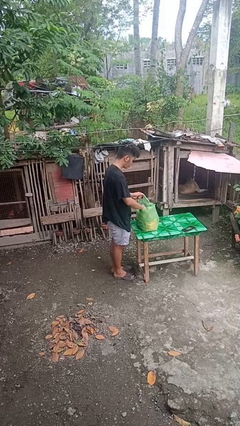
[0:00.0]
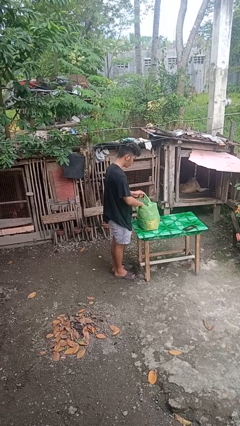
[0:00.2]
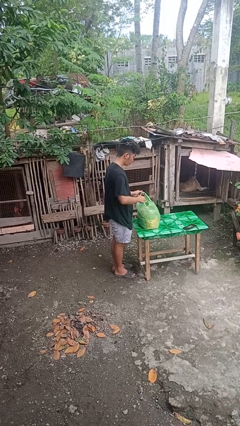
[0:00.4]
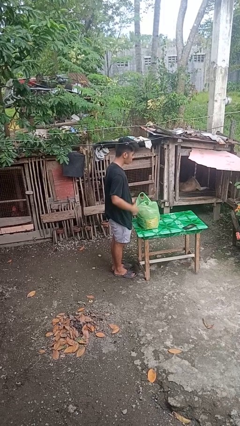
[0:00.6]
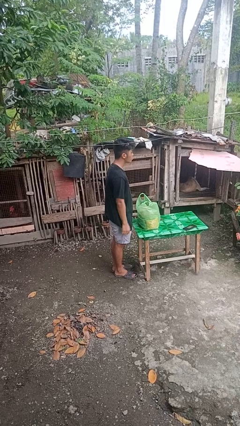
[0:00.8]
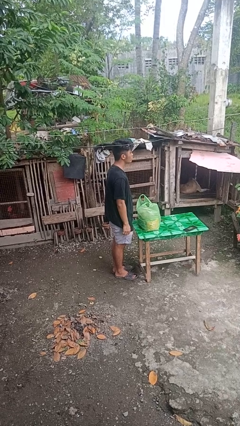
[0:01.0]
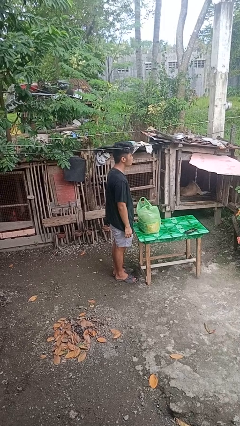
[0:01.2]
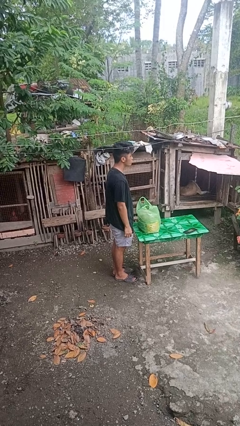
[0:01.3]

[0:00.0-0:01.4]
person puts object into bag

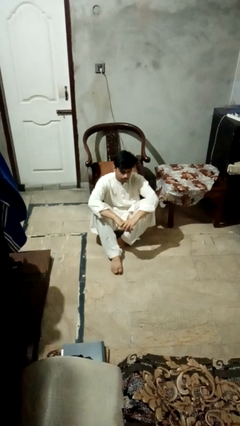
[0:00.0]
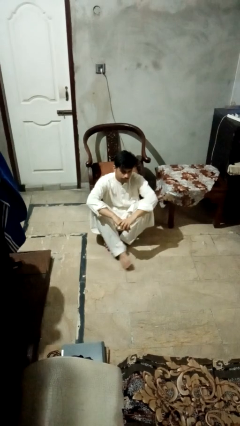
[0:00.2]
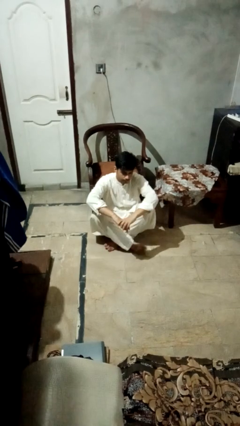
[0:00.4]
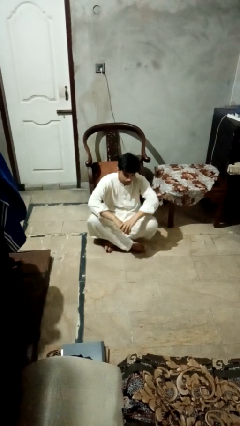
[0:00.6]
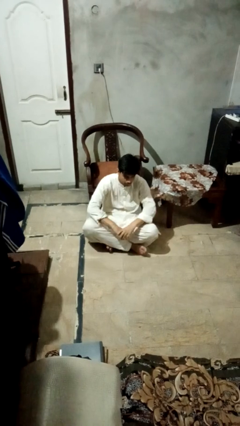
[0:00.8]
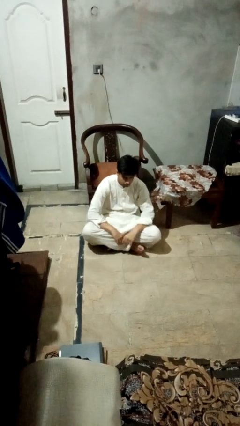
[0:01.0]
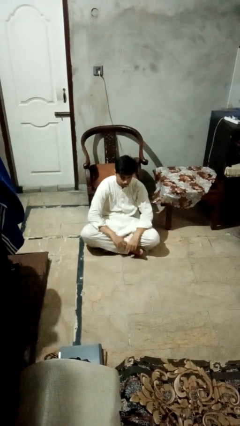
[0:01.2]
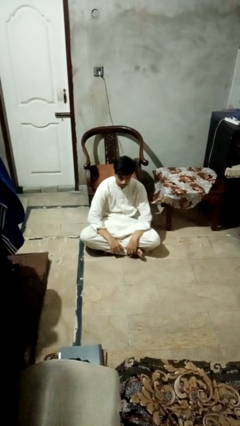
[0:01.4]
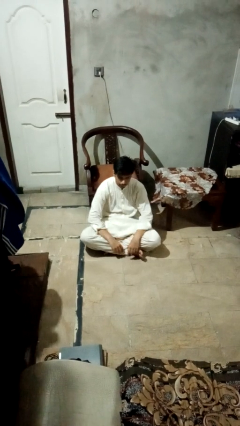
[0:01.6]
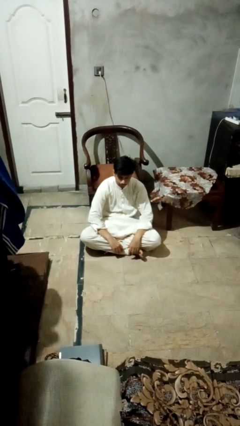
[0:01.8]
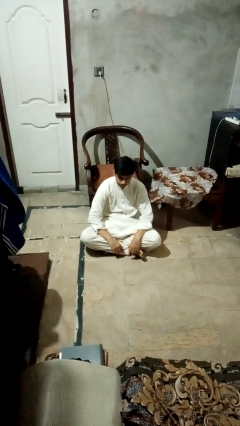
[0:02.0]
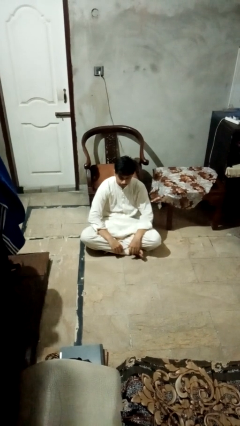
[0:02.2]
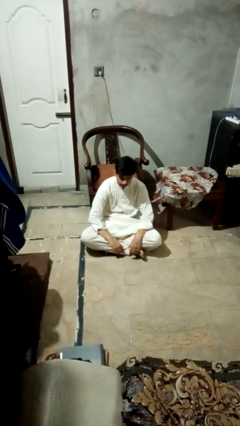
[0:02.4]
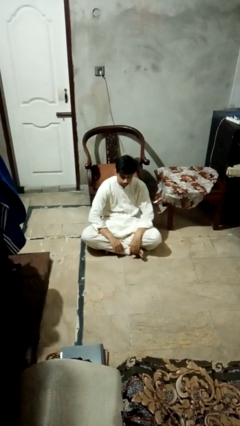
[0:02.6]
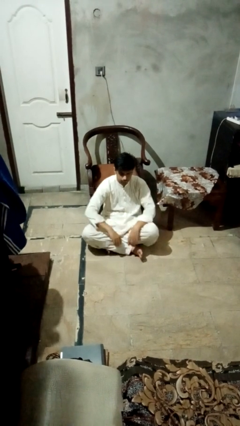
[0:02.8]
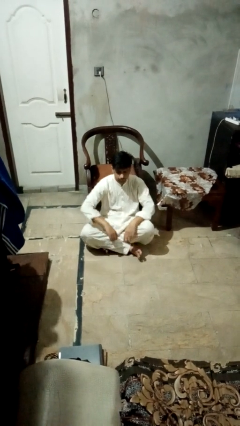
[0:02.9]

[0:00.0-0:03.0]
person crosses legs

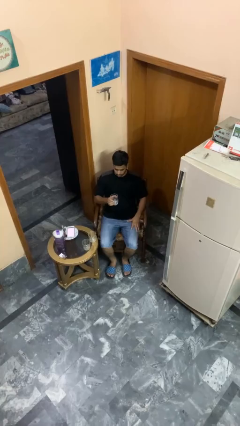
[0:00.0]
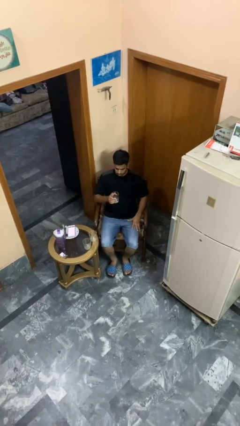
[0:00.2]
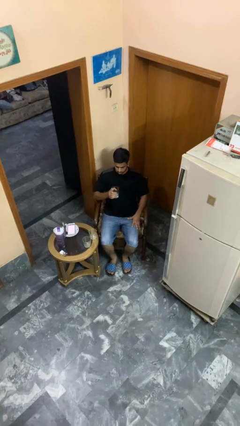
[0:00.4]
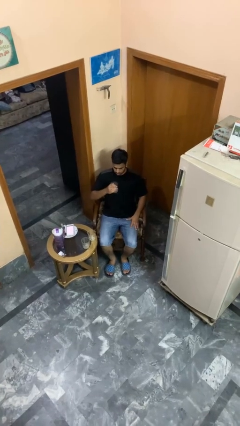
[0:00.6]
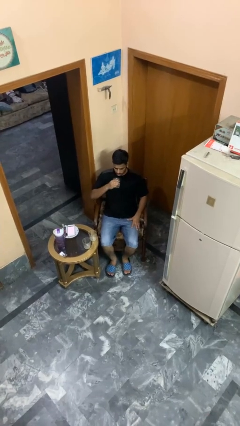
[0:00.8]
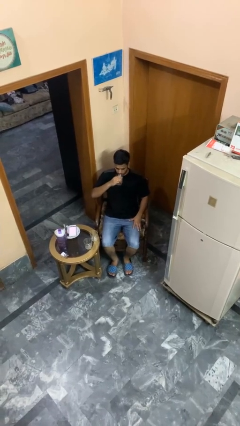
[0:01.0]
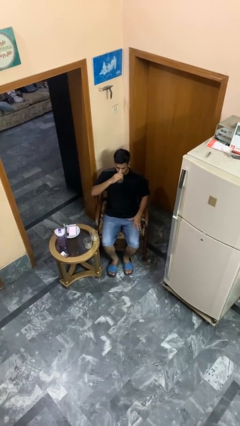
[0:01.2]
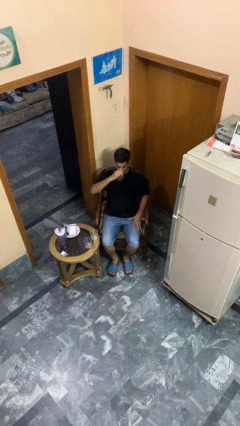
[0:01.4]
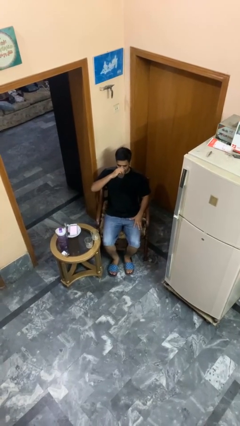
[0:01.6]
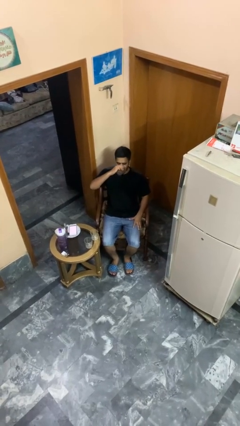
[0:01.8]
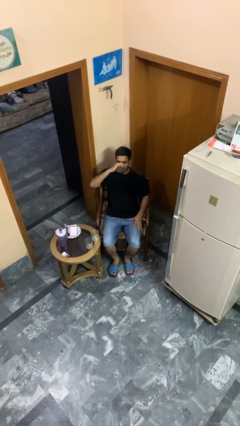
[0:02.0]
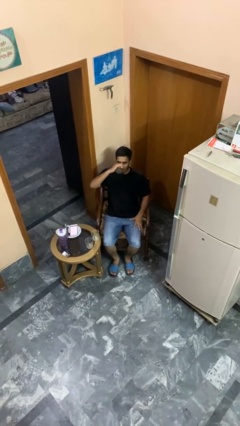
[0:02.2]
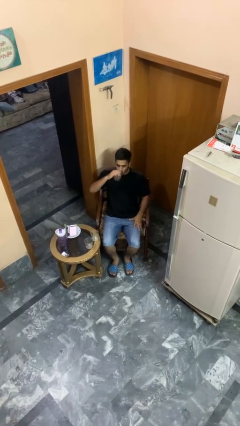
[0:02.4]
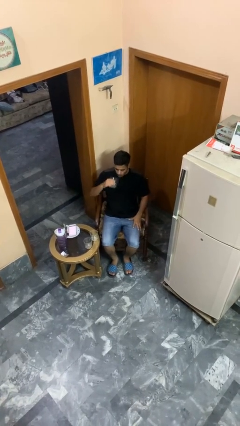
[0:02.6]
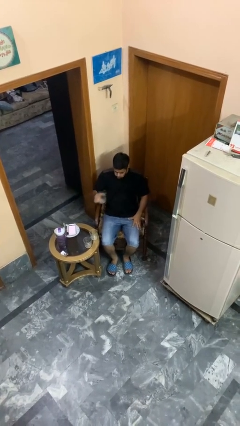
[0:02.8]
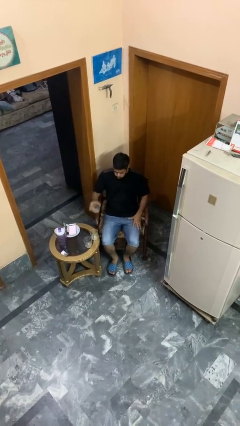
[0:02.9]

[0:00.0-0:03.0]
person drinks from shotglass

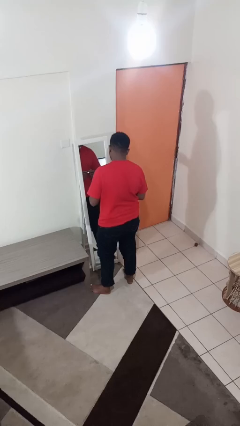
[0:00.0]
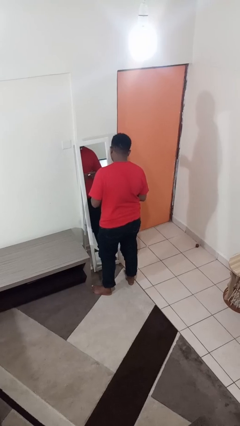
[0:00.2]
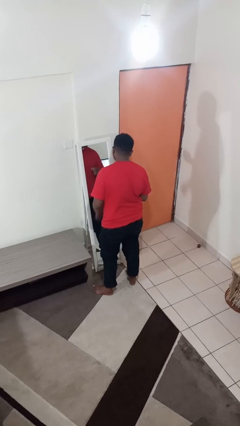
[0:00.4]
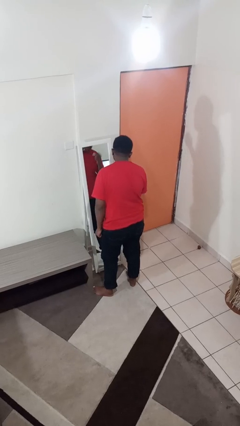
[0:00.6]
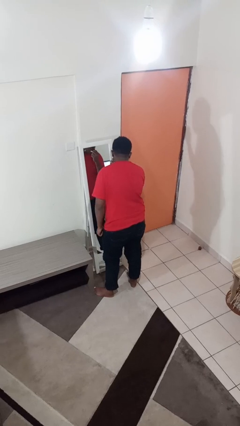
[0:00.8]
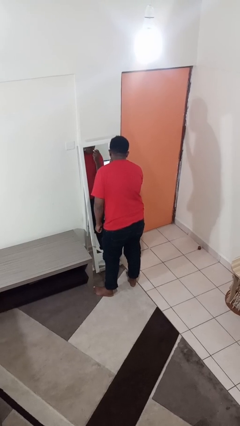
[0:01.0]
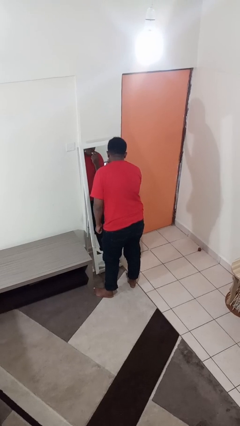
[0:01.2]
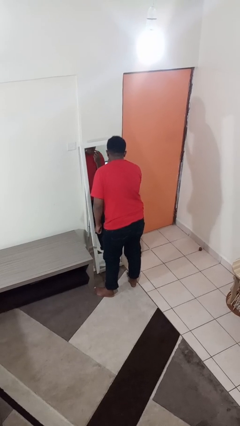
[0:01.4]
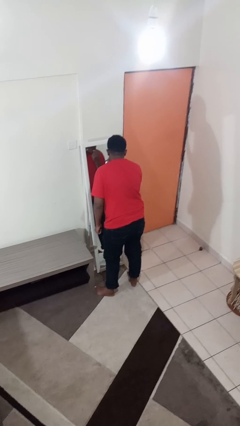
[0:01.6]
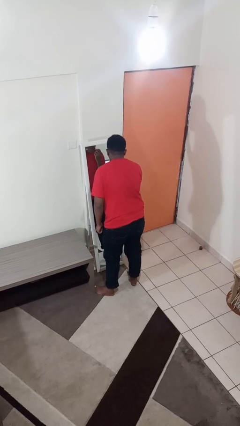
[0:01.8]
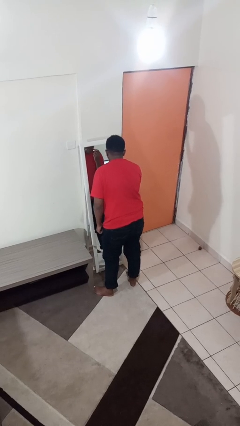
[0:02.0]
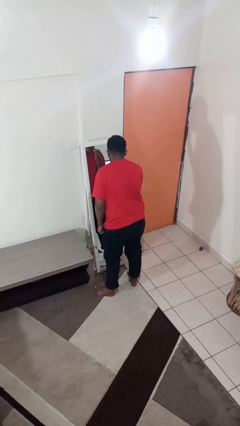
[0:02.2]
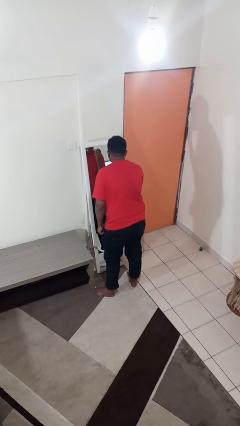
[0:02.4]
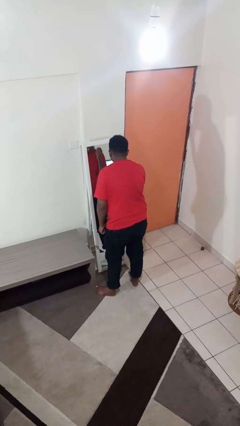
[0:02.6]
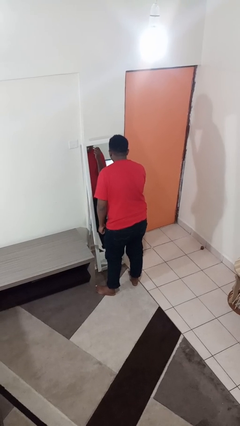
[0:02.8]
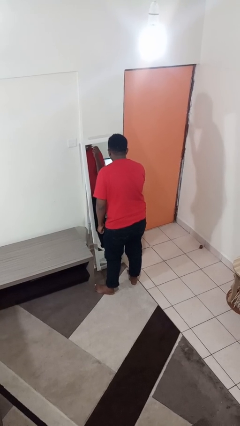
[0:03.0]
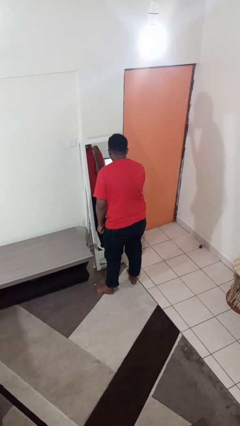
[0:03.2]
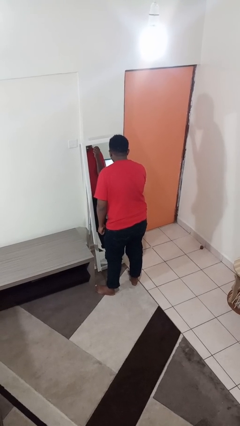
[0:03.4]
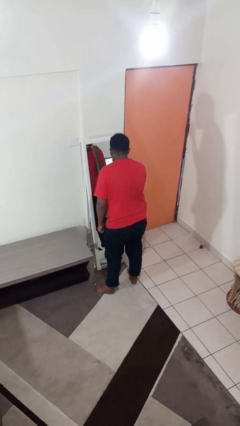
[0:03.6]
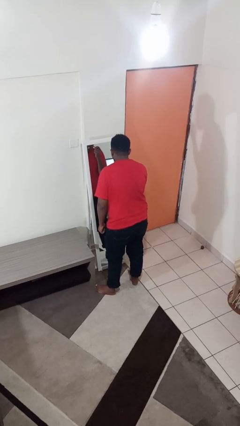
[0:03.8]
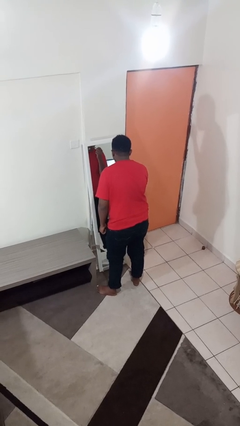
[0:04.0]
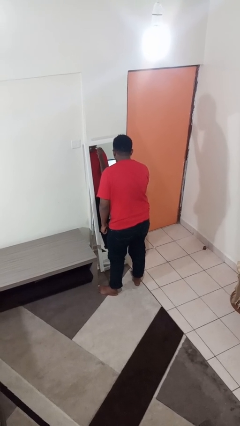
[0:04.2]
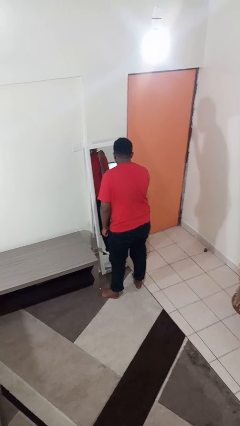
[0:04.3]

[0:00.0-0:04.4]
person applies lip makeup

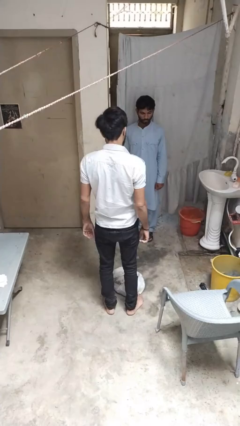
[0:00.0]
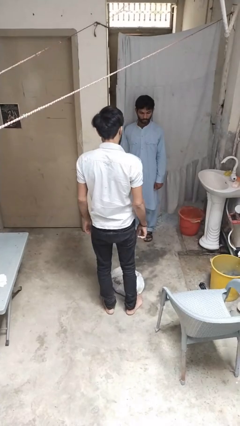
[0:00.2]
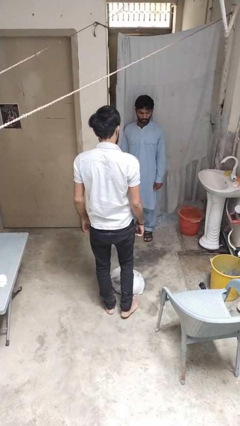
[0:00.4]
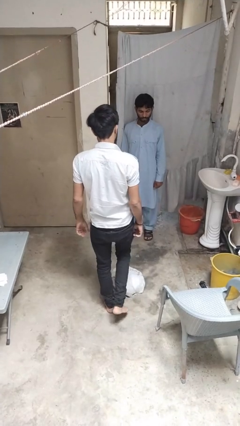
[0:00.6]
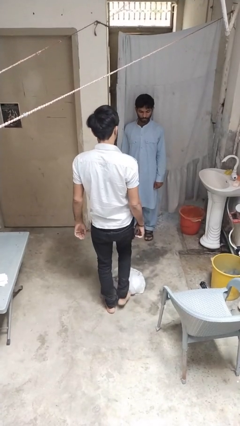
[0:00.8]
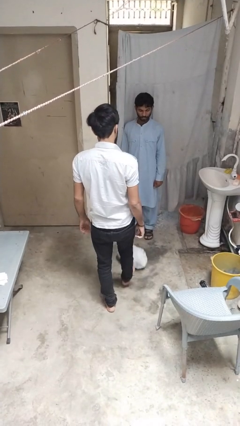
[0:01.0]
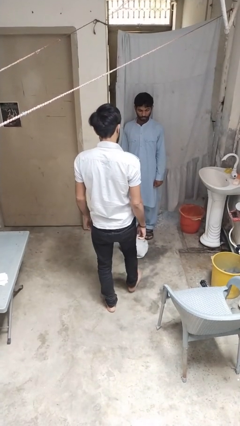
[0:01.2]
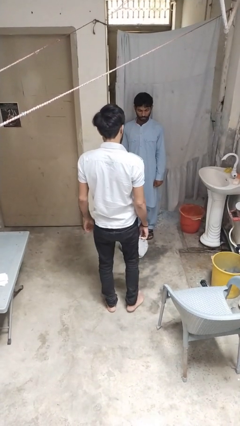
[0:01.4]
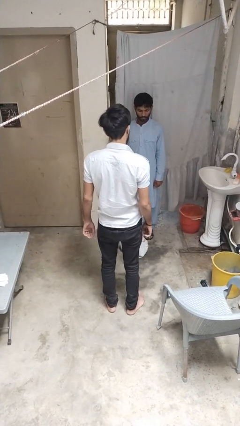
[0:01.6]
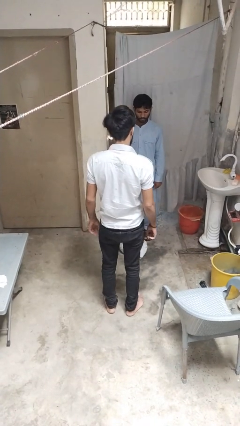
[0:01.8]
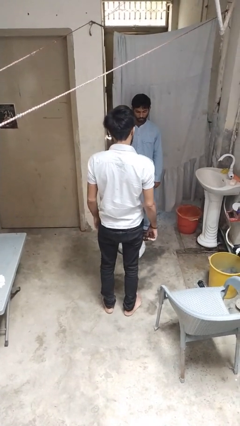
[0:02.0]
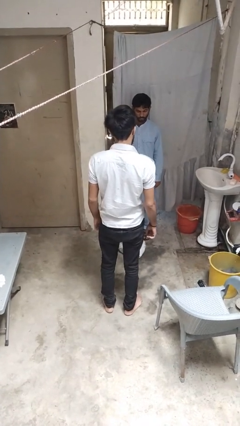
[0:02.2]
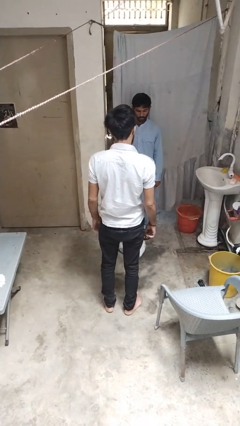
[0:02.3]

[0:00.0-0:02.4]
person kicks object to person

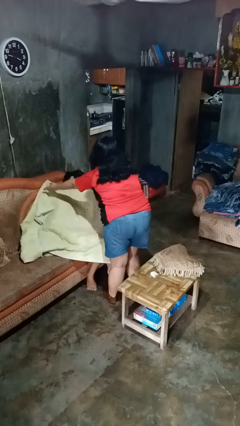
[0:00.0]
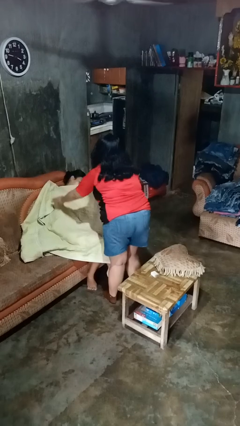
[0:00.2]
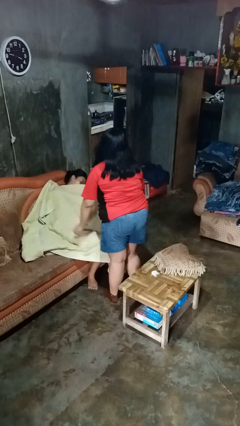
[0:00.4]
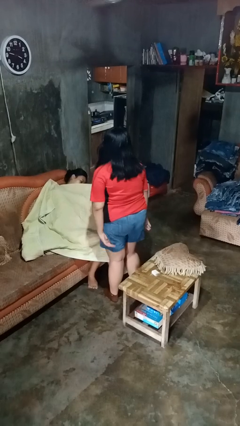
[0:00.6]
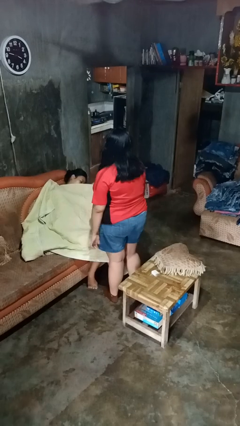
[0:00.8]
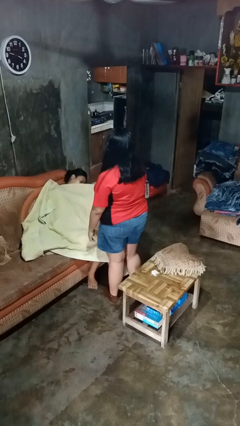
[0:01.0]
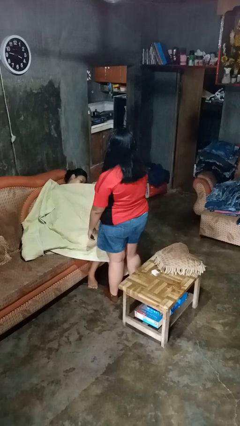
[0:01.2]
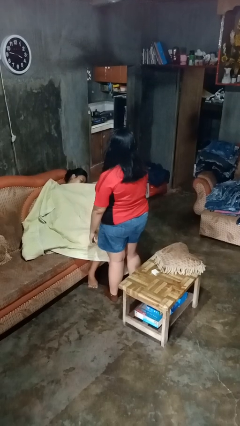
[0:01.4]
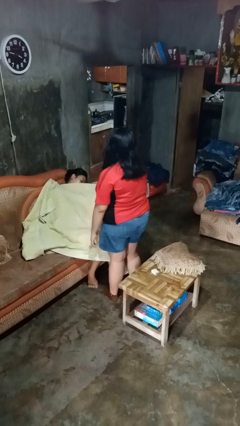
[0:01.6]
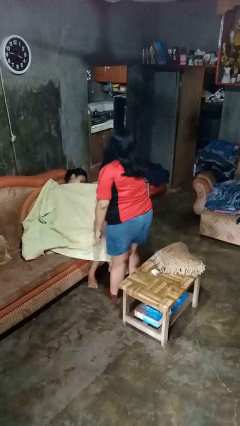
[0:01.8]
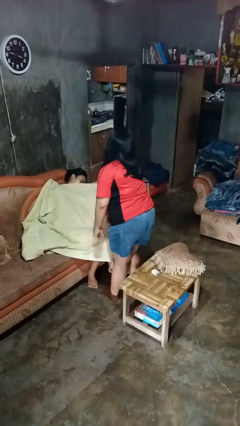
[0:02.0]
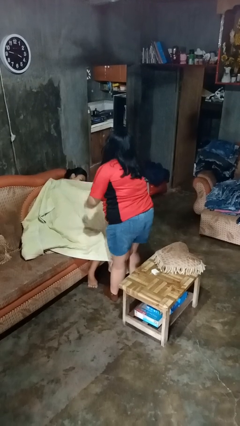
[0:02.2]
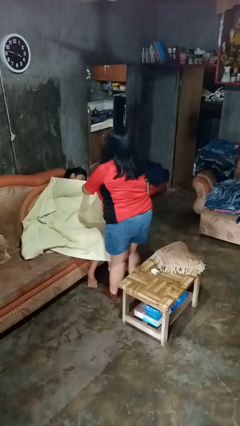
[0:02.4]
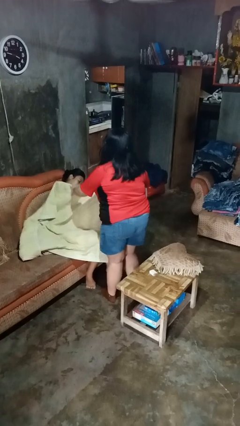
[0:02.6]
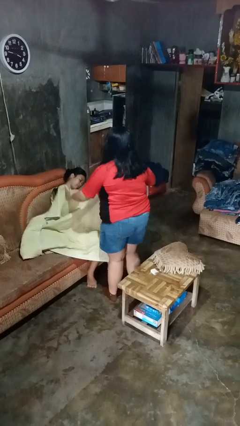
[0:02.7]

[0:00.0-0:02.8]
person covers friend with blanket

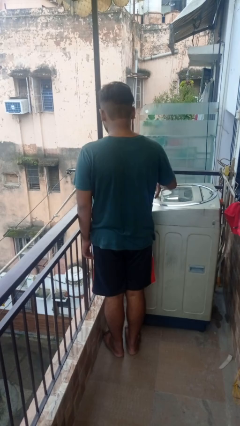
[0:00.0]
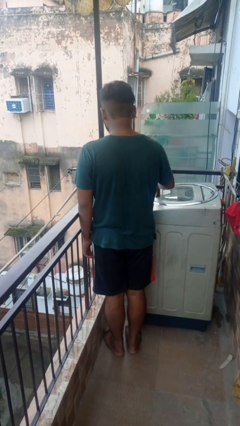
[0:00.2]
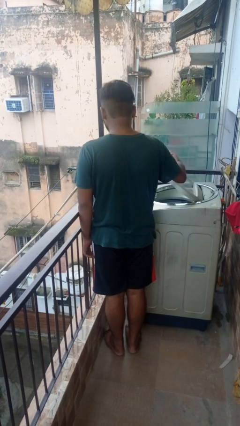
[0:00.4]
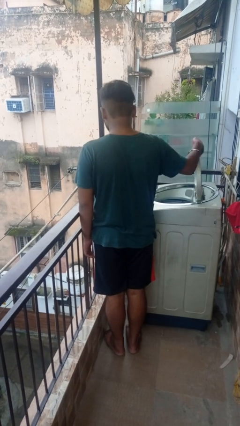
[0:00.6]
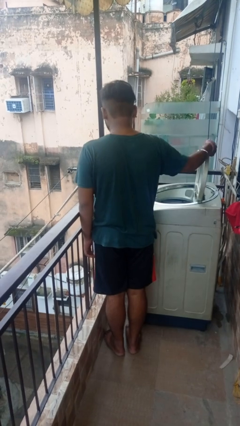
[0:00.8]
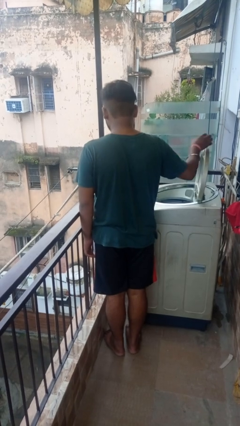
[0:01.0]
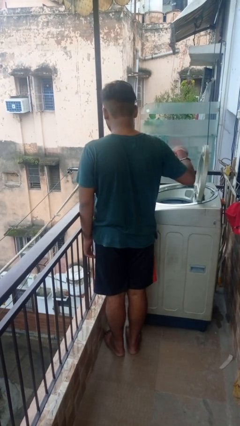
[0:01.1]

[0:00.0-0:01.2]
person opens clothes washer
